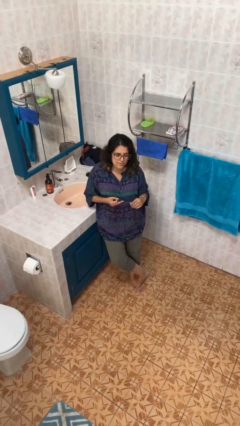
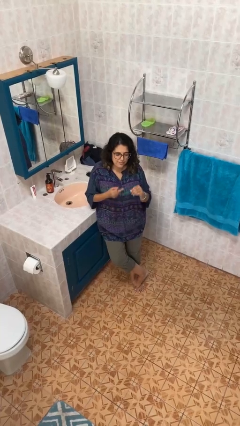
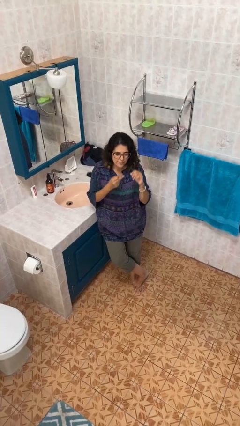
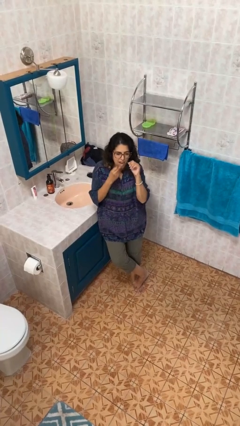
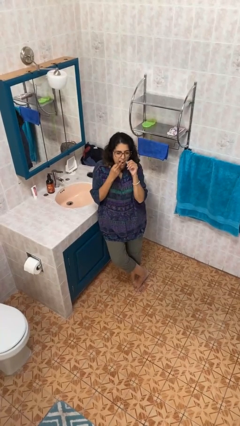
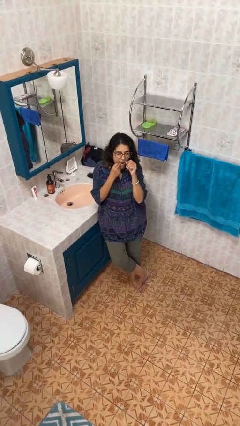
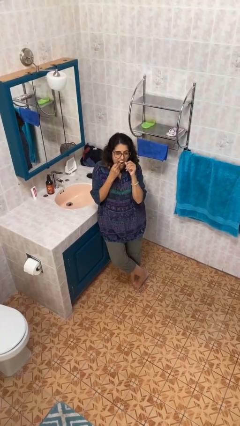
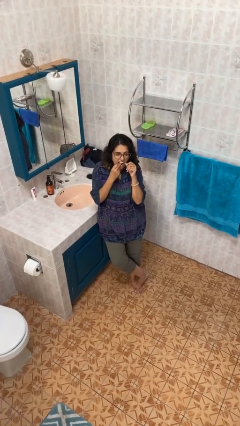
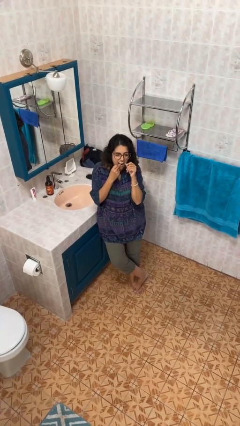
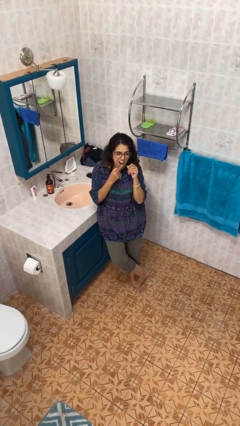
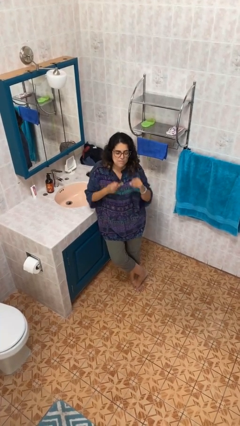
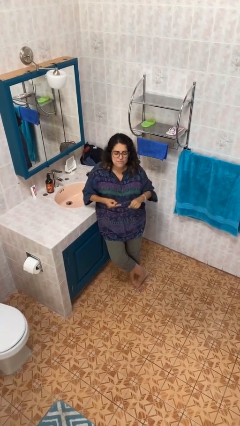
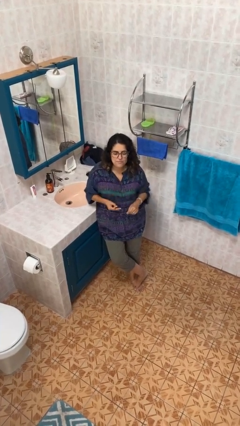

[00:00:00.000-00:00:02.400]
person flosses

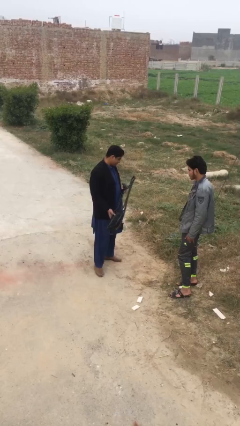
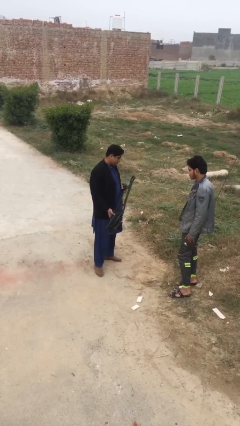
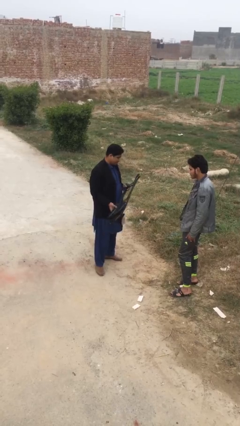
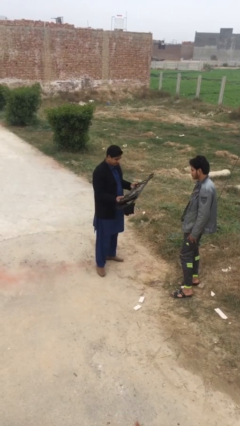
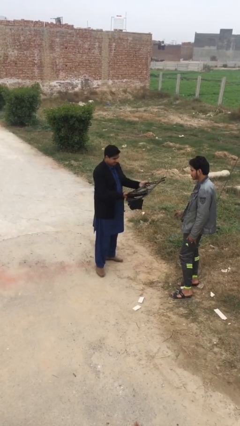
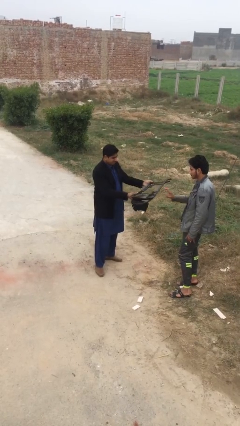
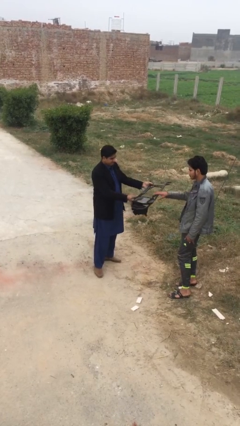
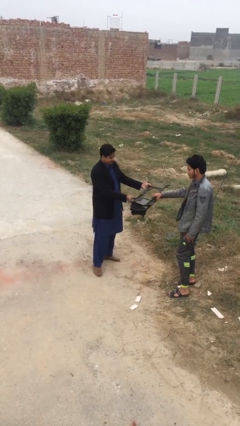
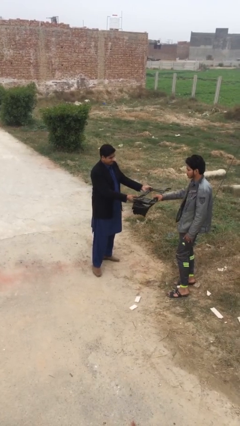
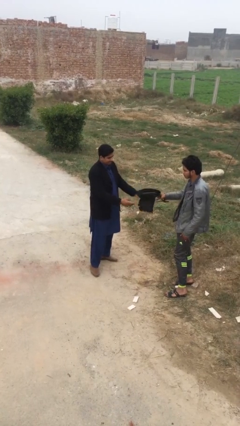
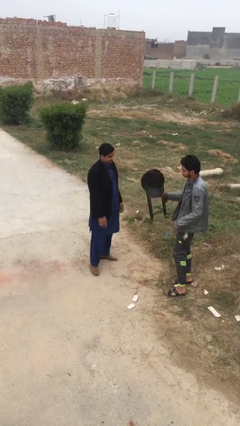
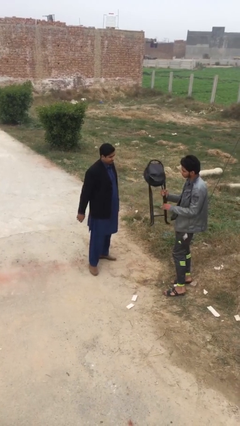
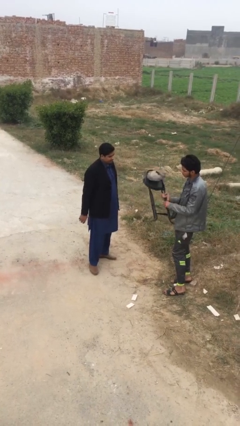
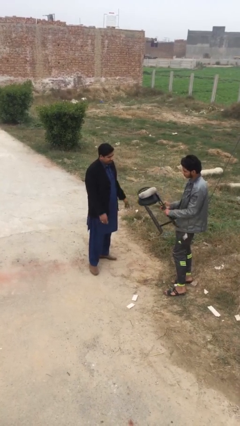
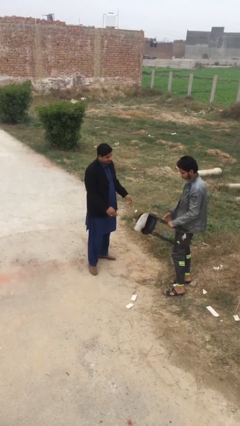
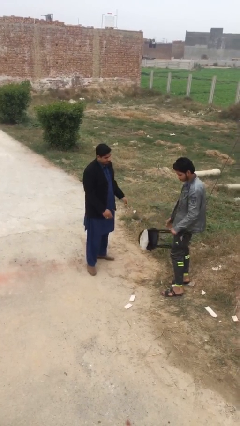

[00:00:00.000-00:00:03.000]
person transfers object to person

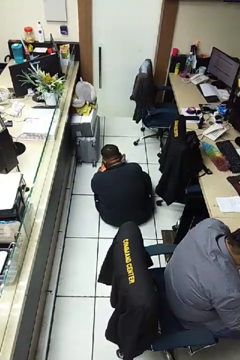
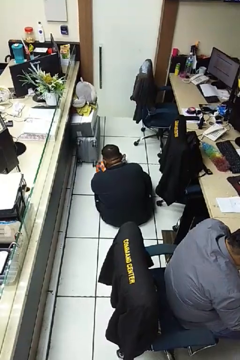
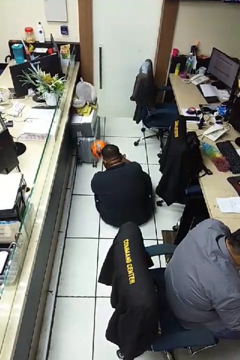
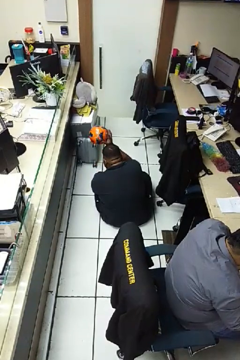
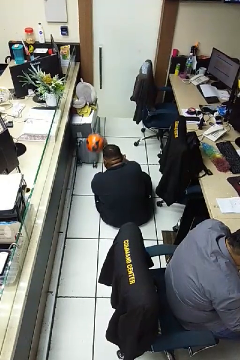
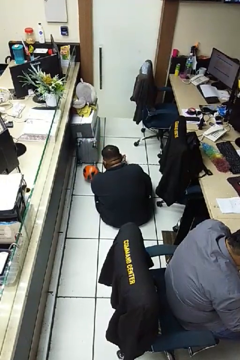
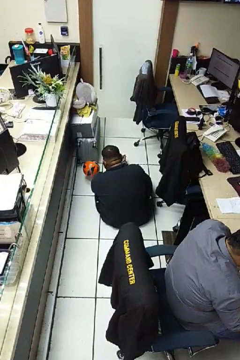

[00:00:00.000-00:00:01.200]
person bounces ball on floor

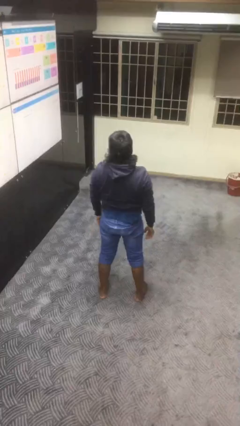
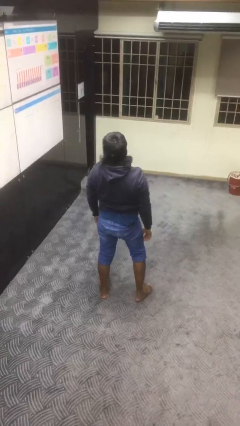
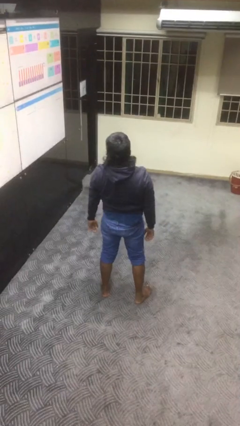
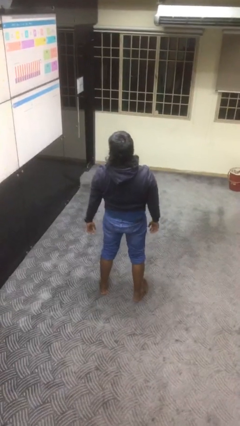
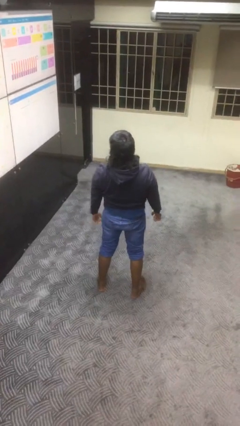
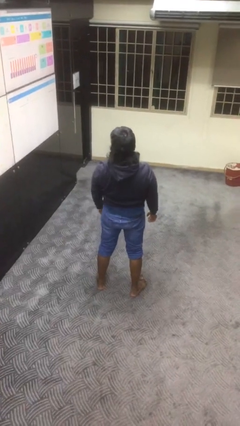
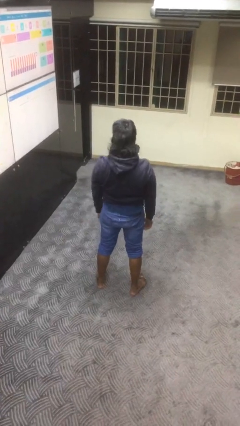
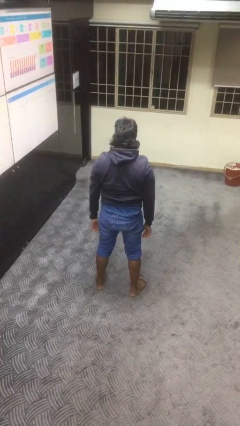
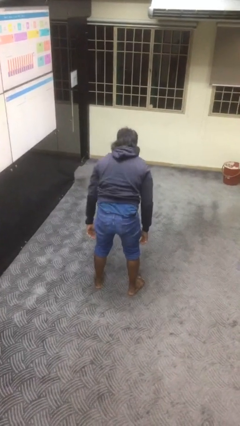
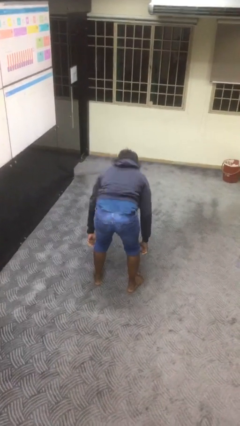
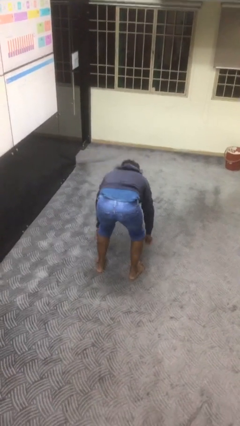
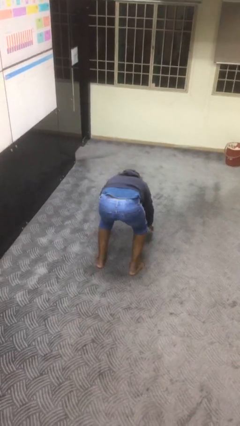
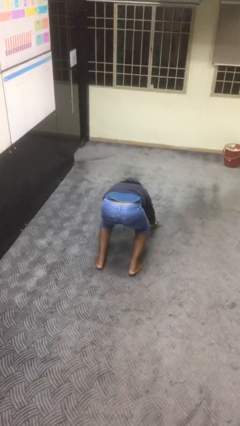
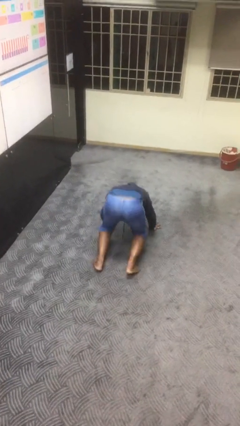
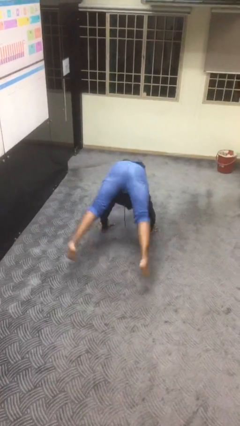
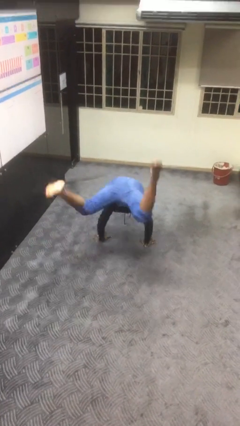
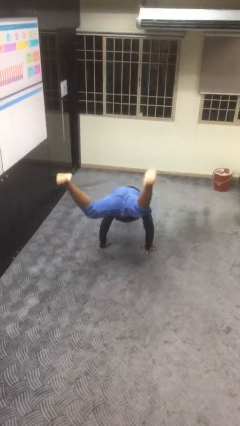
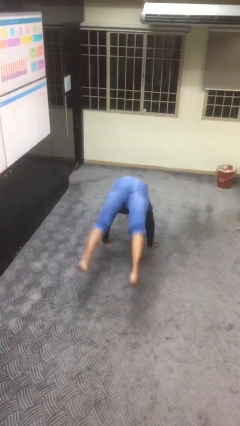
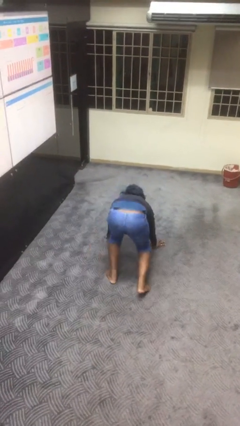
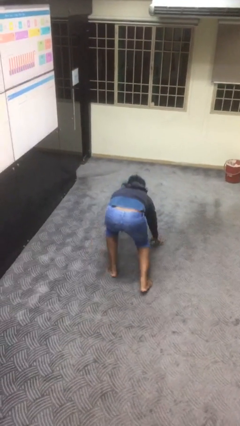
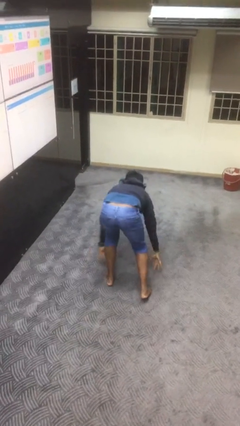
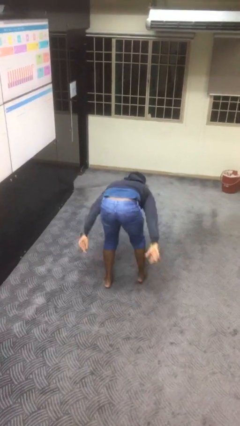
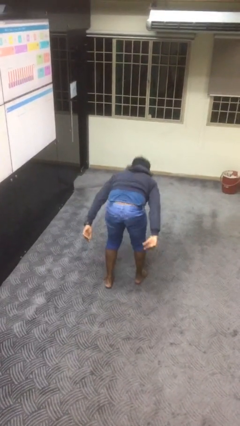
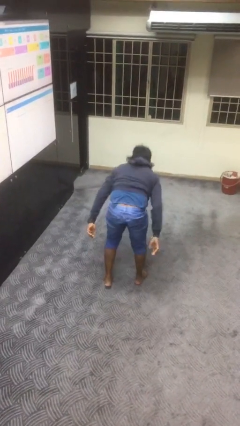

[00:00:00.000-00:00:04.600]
person handstand

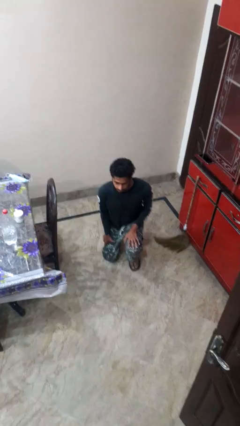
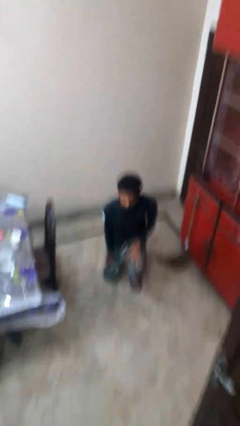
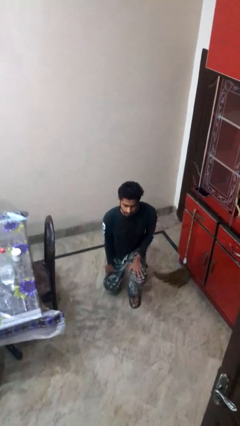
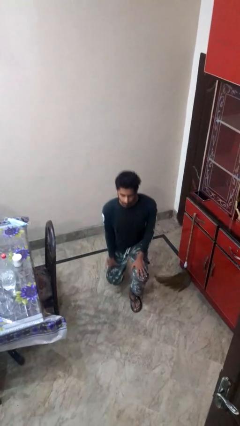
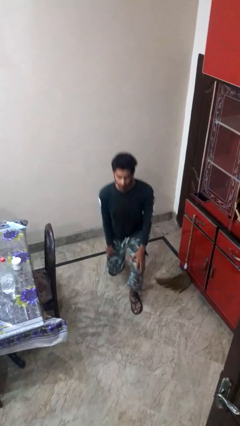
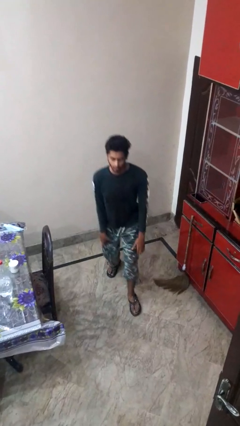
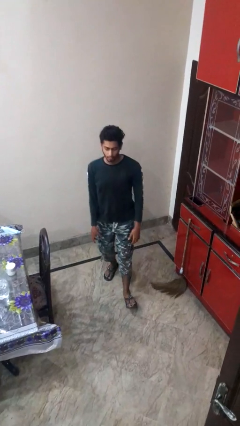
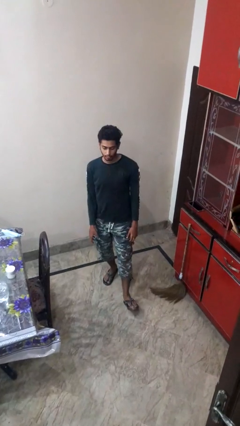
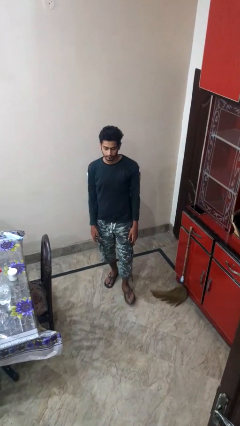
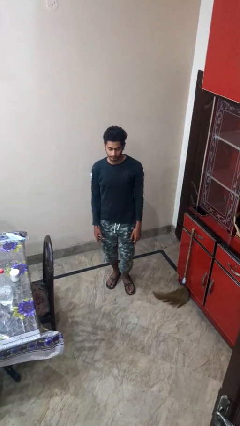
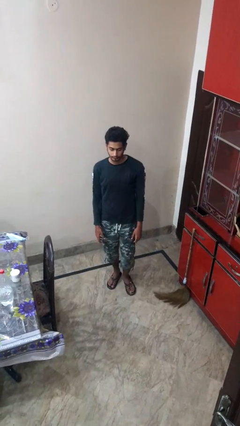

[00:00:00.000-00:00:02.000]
person stands up from floor

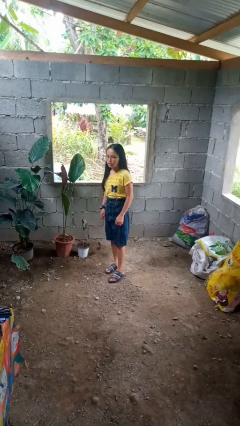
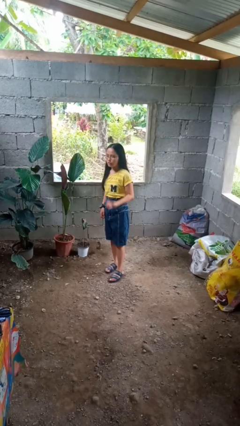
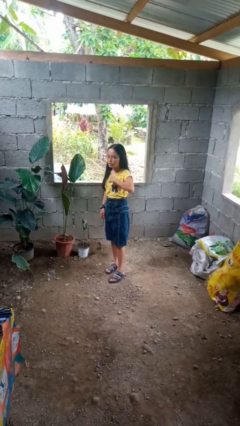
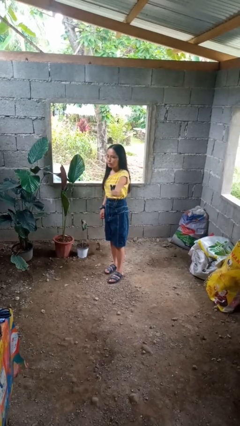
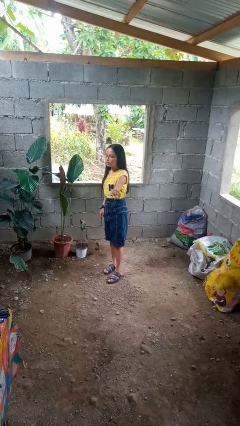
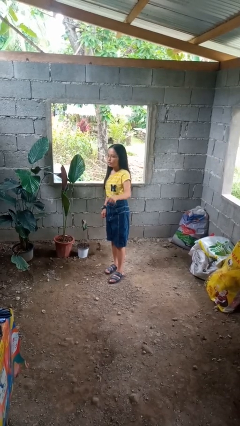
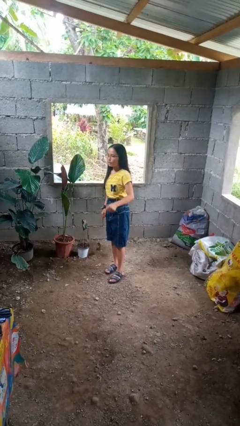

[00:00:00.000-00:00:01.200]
person karate chop

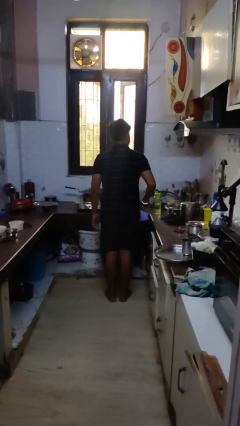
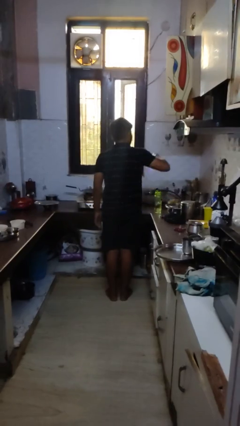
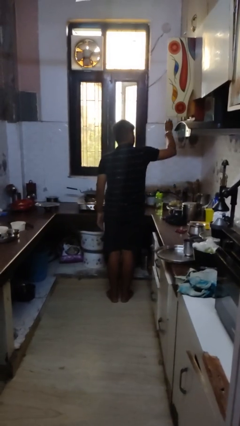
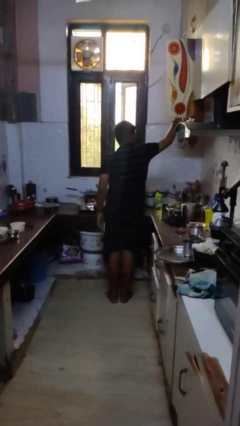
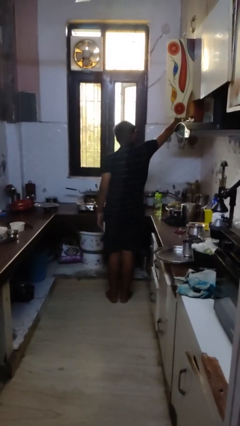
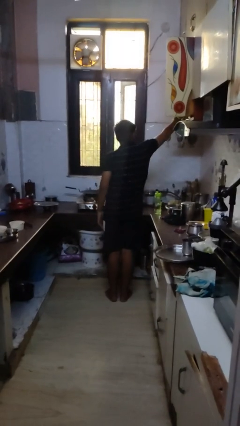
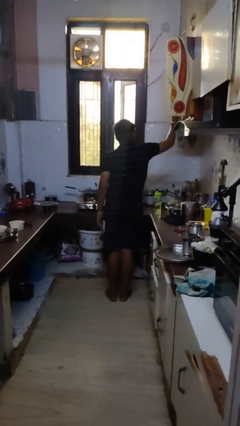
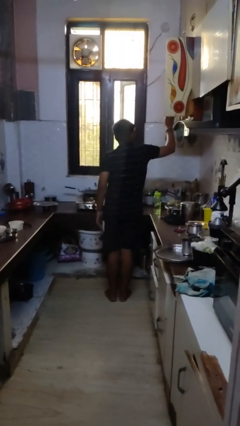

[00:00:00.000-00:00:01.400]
person puts object in cabinet

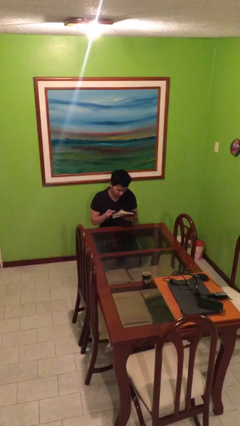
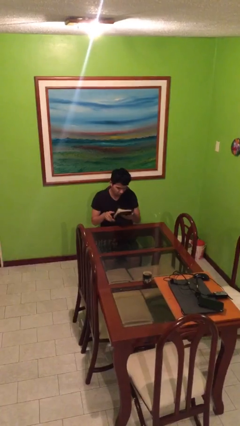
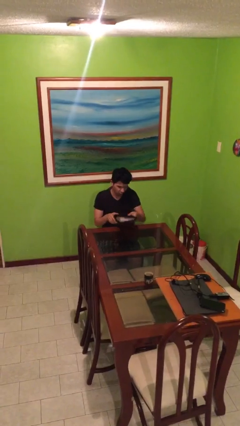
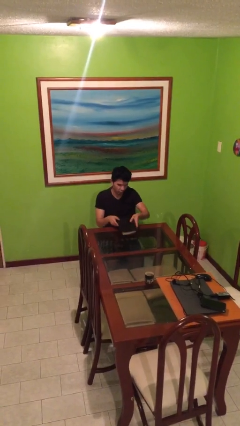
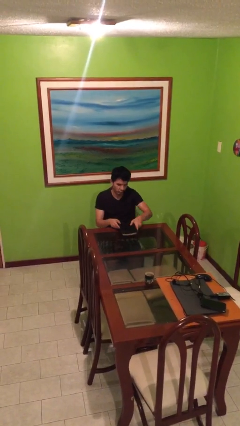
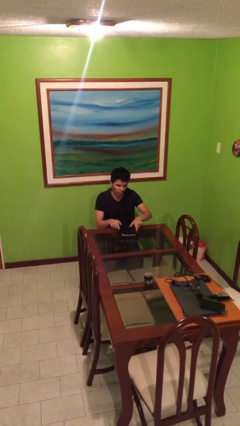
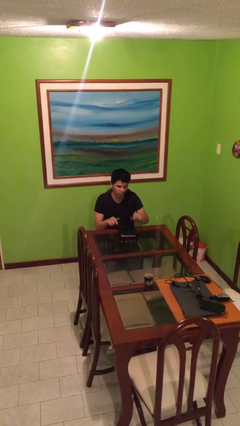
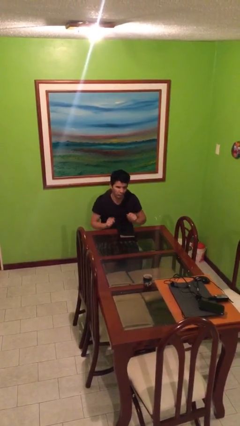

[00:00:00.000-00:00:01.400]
person puts down object on table
